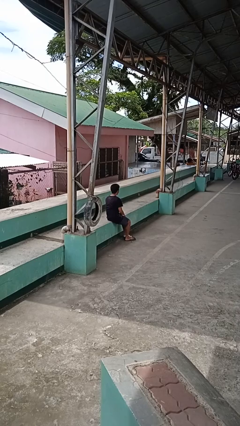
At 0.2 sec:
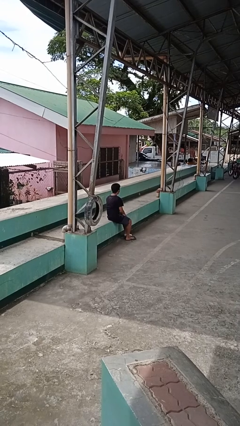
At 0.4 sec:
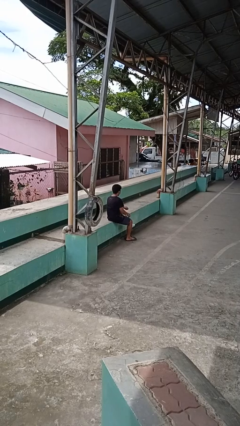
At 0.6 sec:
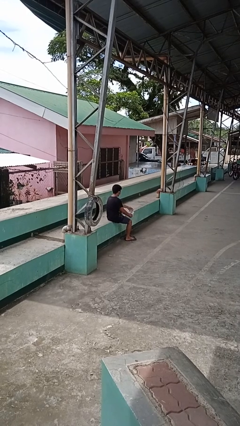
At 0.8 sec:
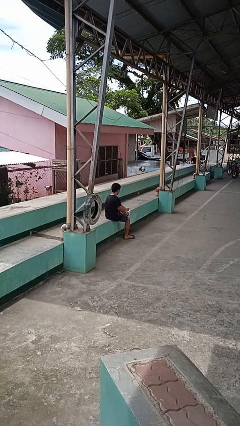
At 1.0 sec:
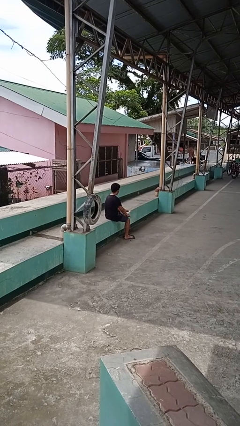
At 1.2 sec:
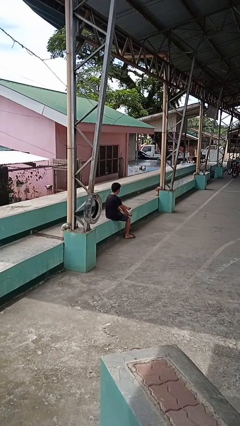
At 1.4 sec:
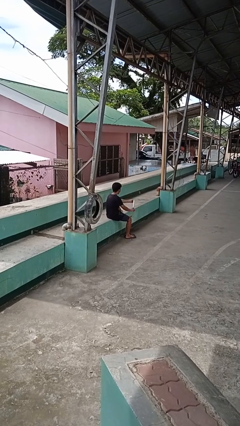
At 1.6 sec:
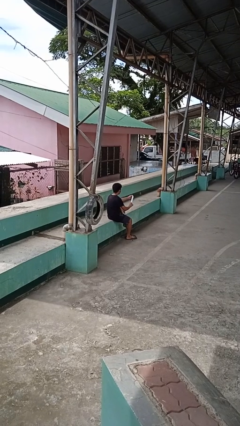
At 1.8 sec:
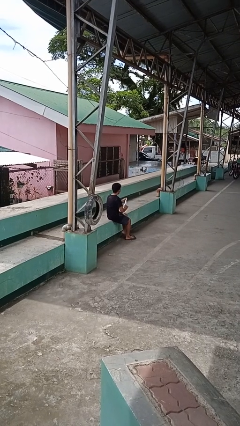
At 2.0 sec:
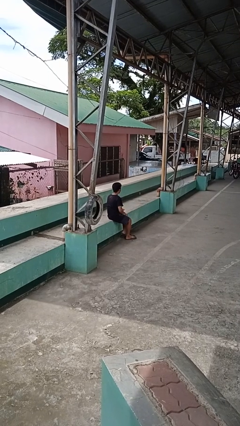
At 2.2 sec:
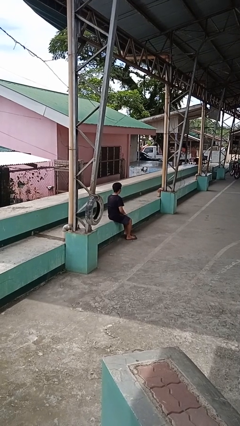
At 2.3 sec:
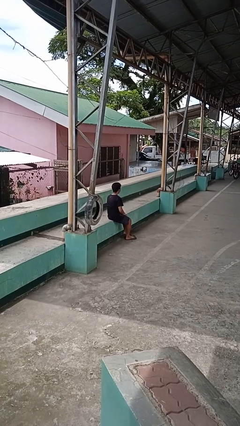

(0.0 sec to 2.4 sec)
person takes off socks

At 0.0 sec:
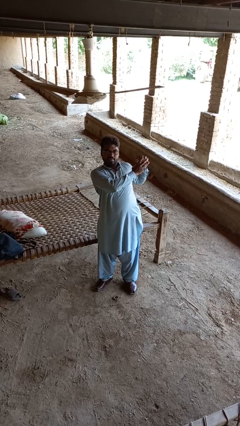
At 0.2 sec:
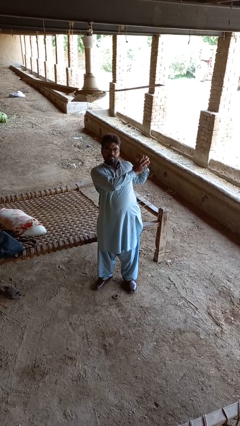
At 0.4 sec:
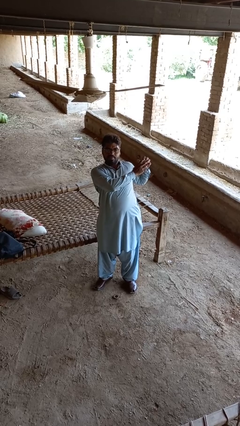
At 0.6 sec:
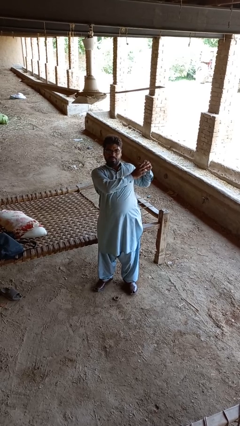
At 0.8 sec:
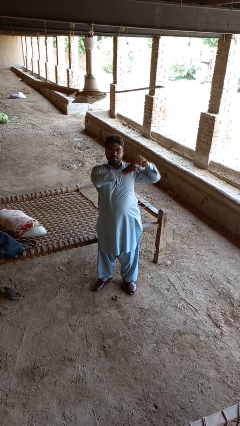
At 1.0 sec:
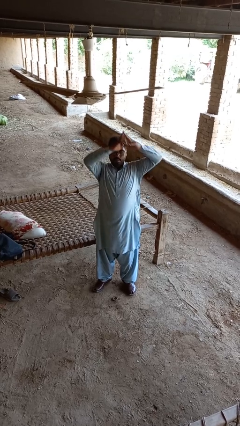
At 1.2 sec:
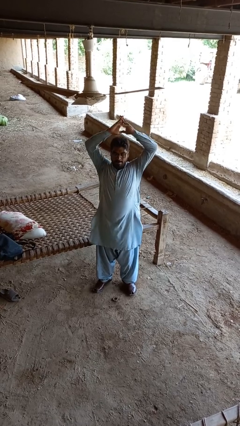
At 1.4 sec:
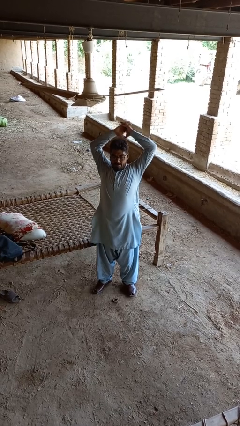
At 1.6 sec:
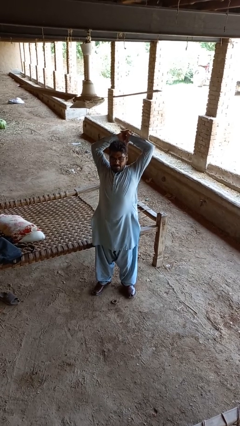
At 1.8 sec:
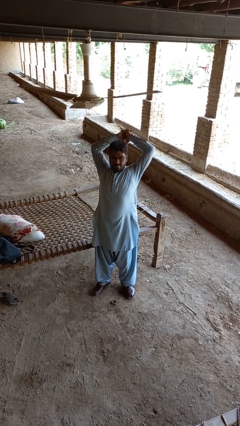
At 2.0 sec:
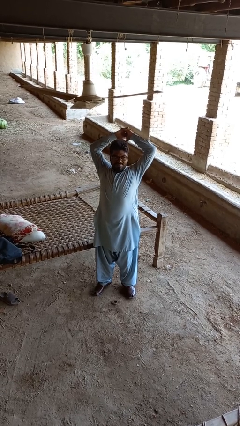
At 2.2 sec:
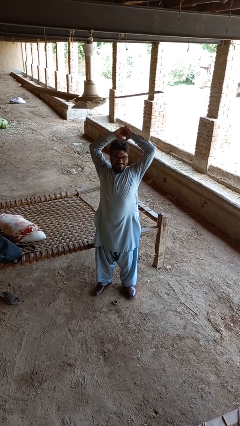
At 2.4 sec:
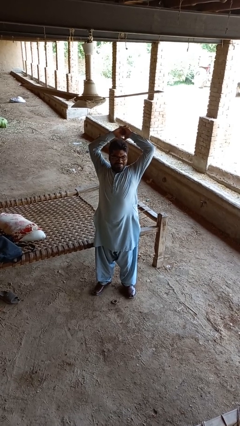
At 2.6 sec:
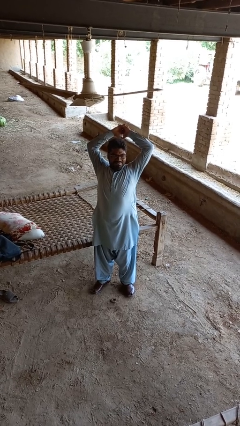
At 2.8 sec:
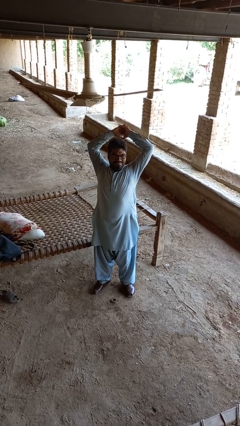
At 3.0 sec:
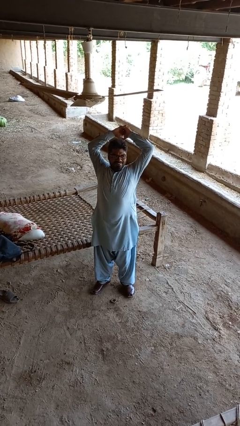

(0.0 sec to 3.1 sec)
person stretches arms over head

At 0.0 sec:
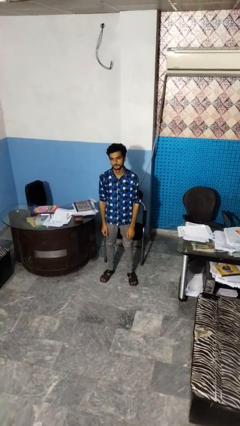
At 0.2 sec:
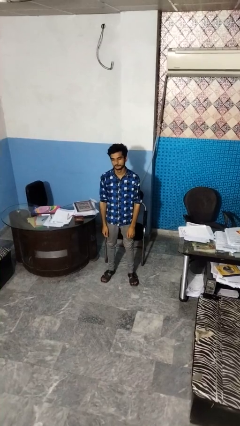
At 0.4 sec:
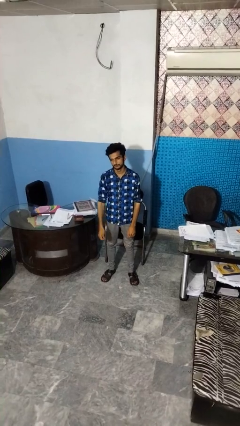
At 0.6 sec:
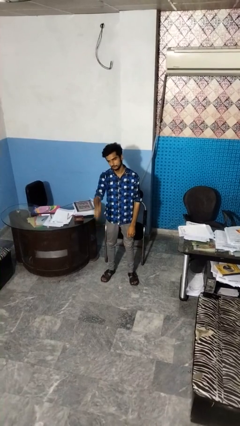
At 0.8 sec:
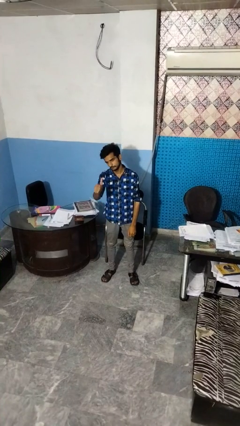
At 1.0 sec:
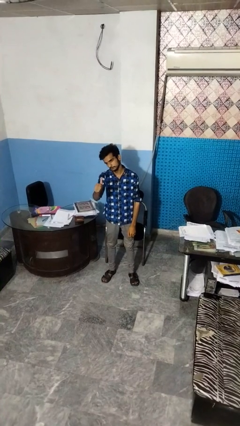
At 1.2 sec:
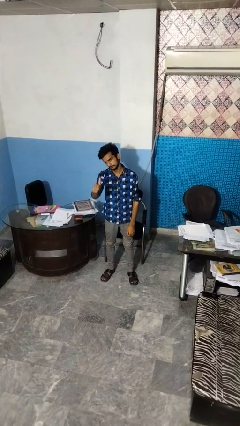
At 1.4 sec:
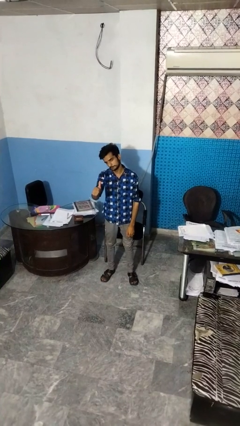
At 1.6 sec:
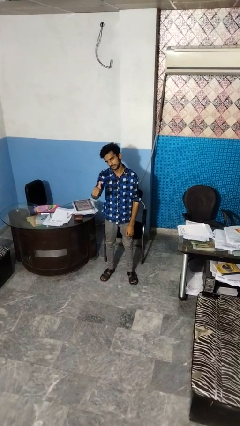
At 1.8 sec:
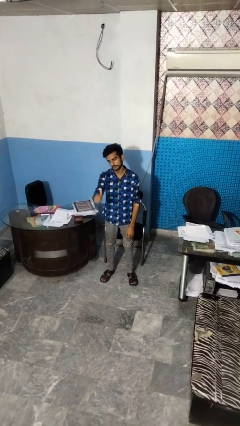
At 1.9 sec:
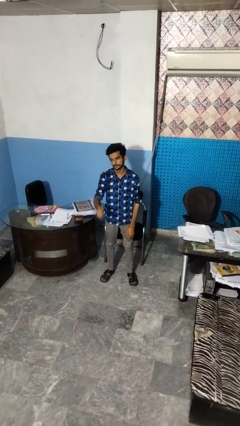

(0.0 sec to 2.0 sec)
person gestures thumbs up

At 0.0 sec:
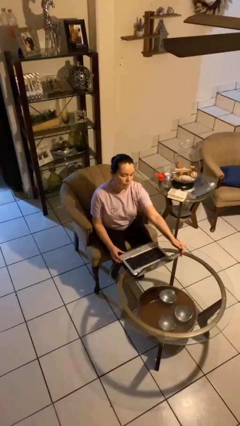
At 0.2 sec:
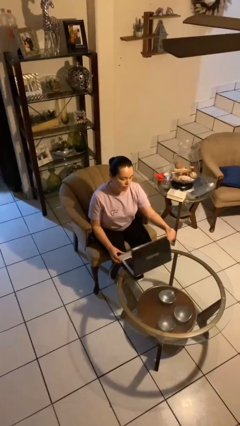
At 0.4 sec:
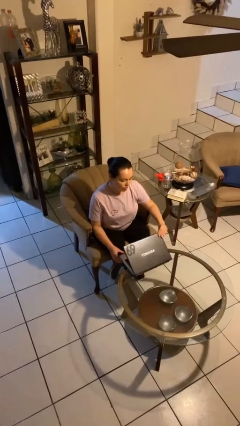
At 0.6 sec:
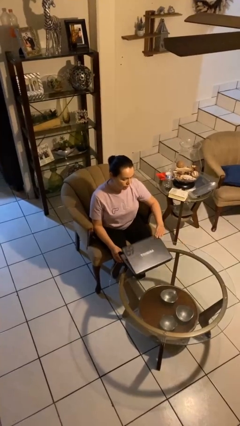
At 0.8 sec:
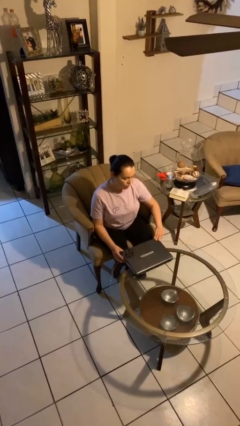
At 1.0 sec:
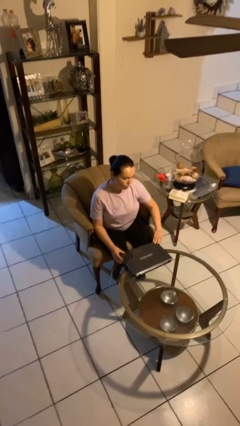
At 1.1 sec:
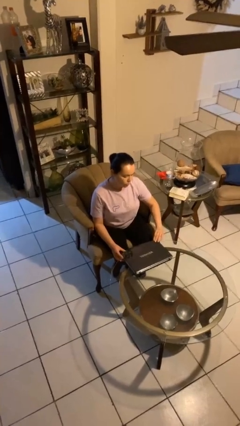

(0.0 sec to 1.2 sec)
person closes laptop

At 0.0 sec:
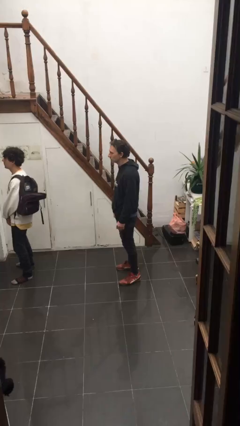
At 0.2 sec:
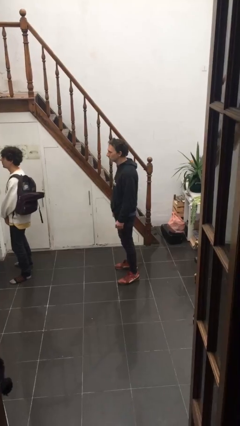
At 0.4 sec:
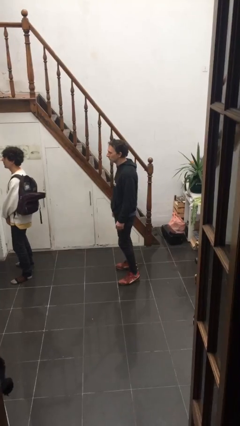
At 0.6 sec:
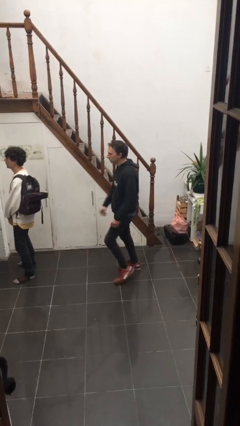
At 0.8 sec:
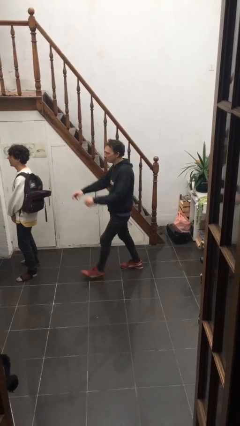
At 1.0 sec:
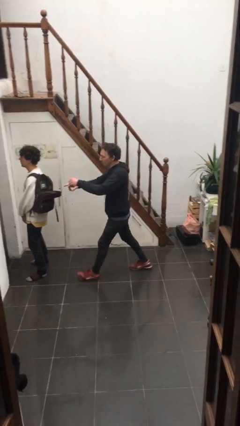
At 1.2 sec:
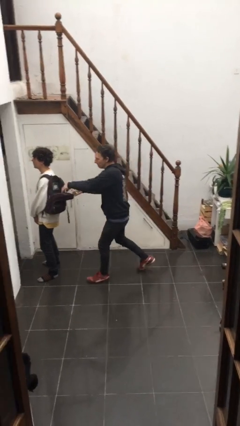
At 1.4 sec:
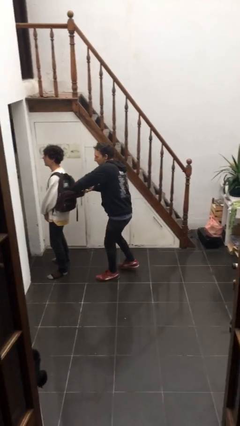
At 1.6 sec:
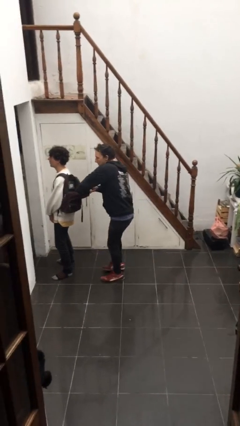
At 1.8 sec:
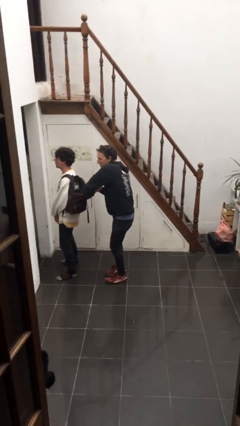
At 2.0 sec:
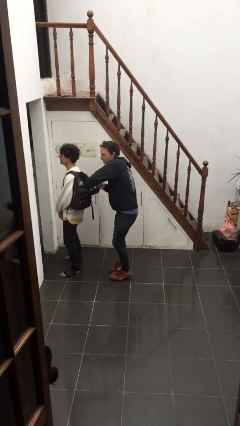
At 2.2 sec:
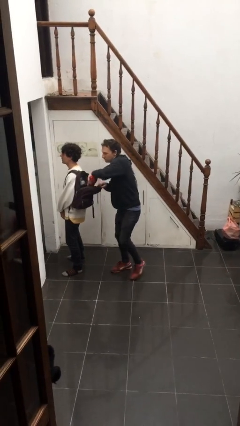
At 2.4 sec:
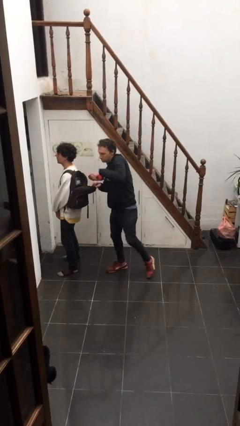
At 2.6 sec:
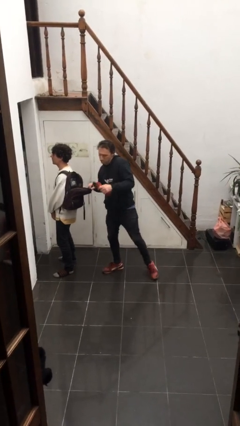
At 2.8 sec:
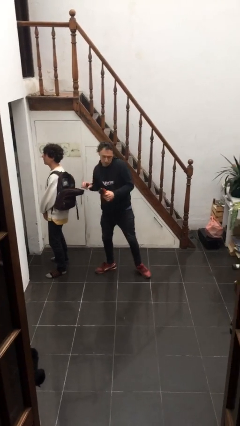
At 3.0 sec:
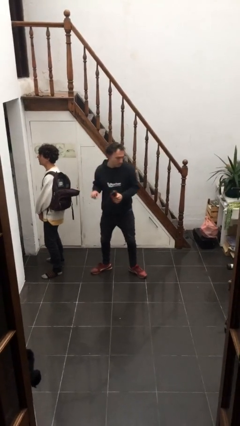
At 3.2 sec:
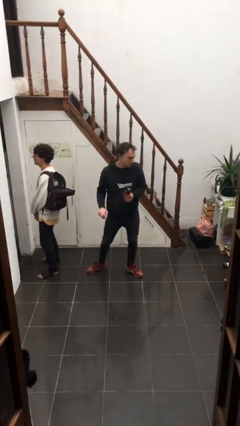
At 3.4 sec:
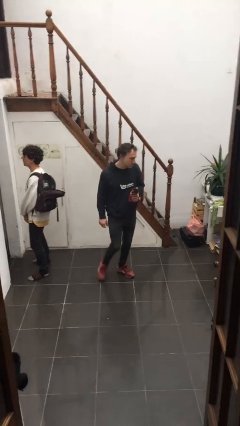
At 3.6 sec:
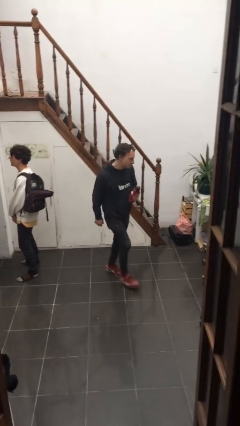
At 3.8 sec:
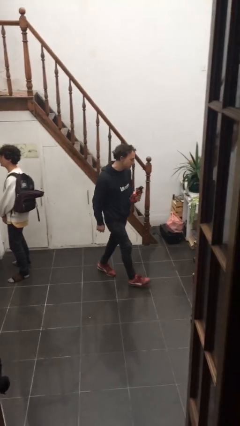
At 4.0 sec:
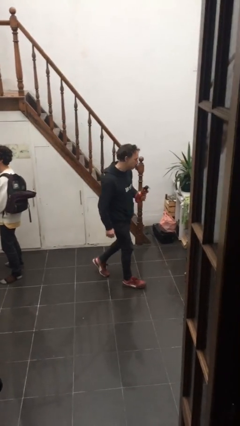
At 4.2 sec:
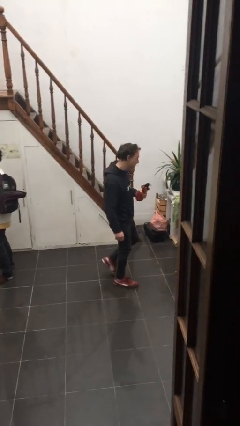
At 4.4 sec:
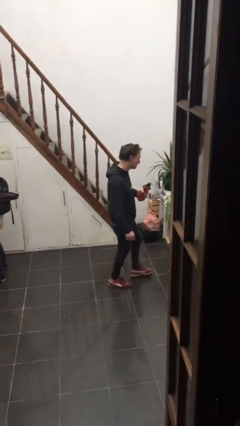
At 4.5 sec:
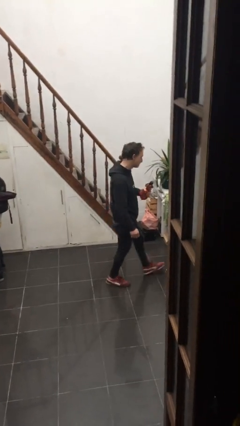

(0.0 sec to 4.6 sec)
person steals object from person

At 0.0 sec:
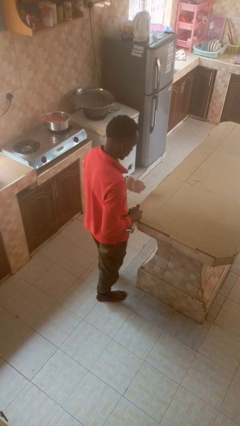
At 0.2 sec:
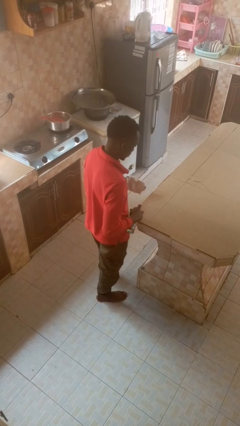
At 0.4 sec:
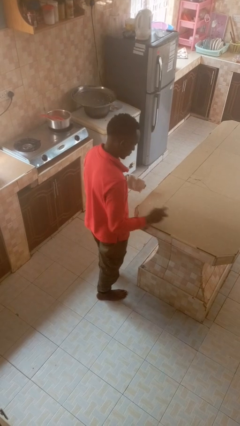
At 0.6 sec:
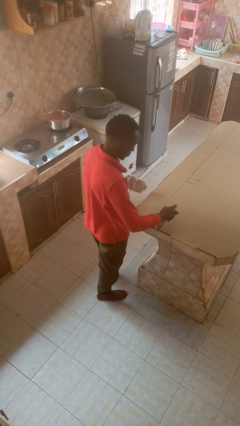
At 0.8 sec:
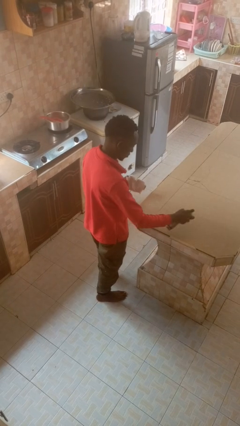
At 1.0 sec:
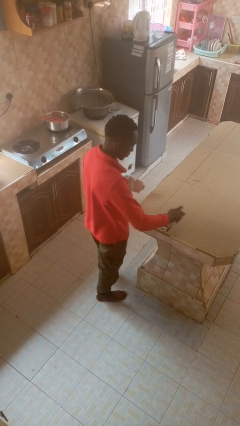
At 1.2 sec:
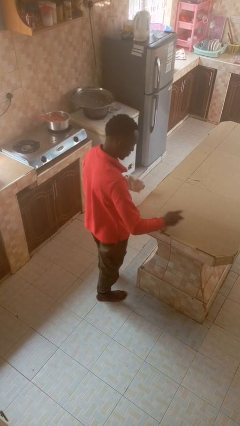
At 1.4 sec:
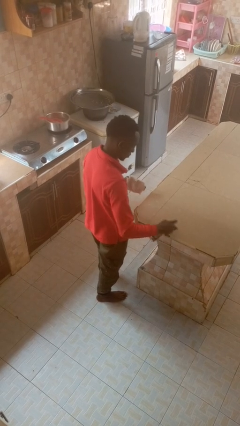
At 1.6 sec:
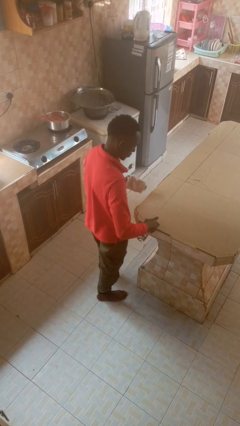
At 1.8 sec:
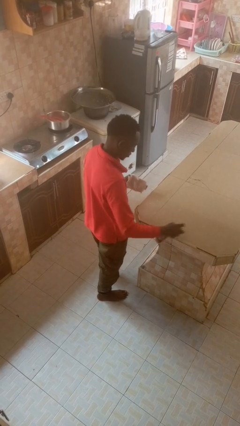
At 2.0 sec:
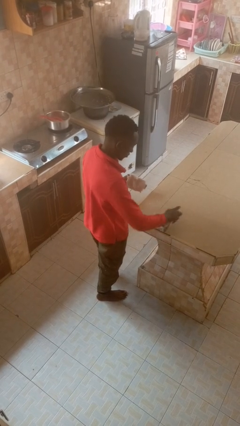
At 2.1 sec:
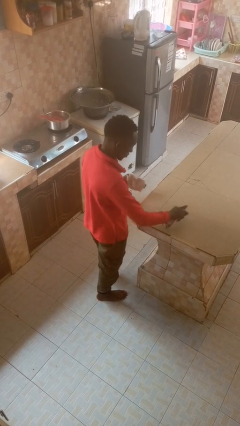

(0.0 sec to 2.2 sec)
person sprays from bottle

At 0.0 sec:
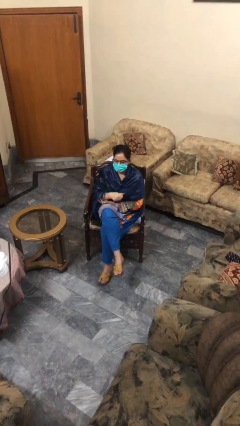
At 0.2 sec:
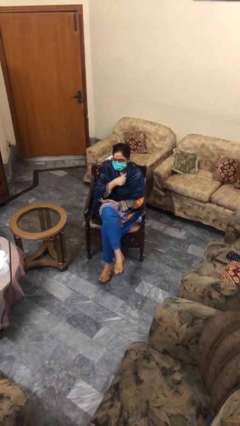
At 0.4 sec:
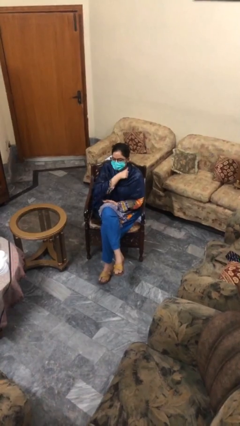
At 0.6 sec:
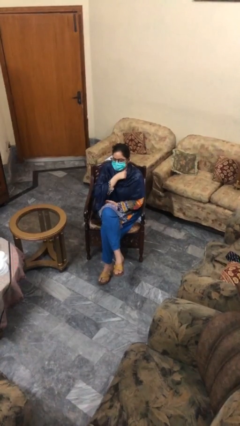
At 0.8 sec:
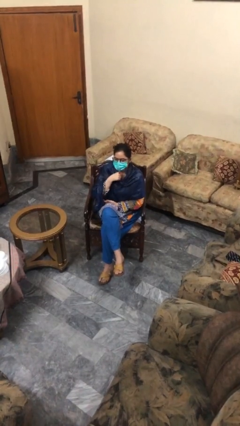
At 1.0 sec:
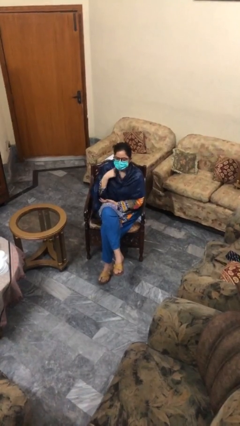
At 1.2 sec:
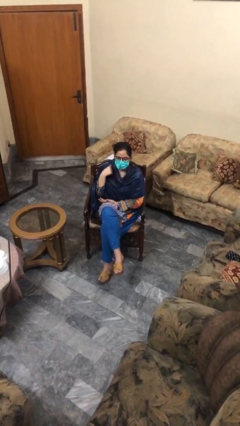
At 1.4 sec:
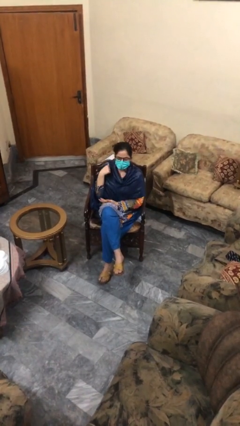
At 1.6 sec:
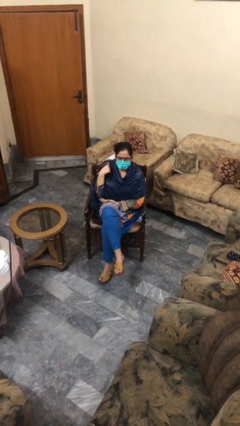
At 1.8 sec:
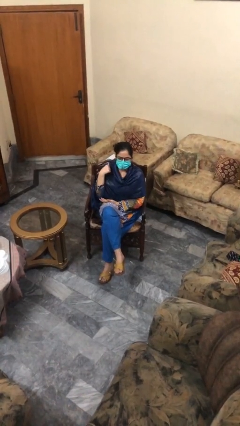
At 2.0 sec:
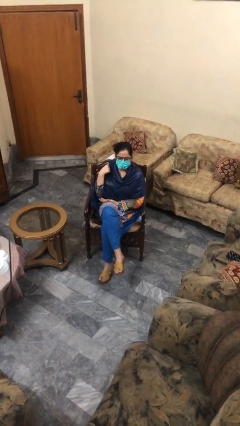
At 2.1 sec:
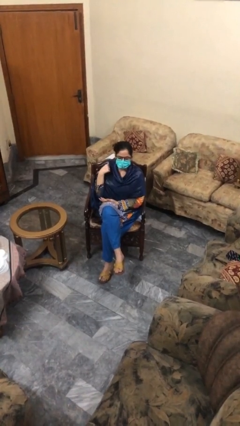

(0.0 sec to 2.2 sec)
person gestures cut
